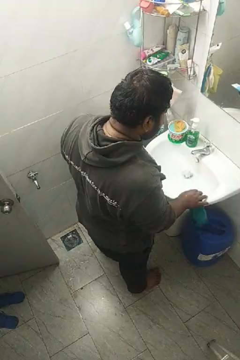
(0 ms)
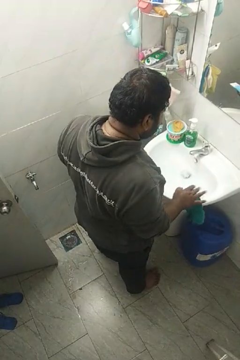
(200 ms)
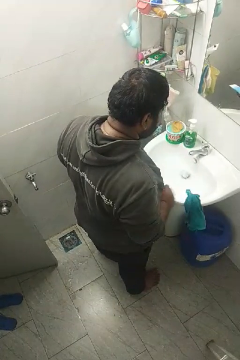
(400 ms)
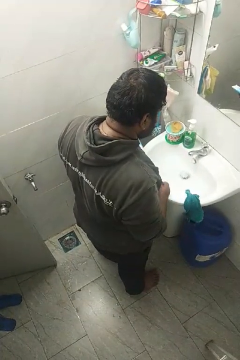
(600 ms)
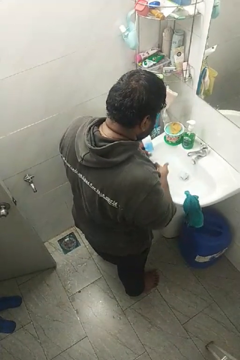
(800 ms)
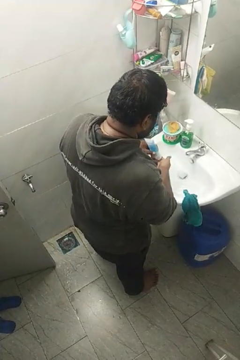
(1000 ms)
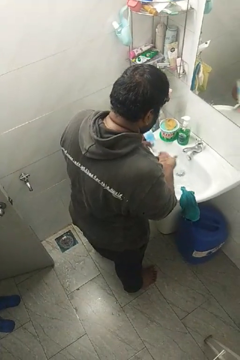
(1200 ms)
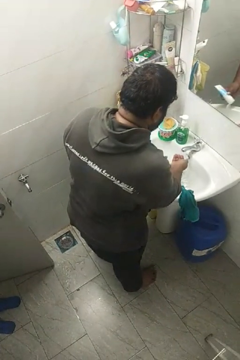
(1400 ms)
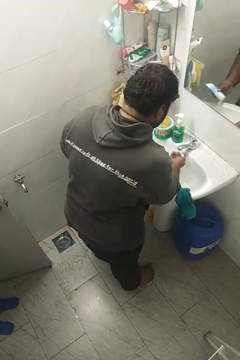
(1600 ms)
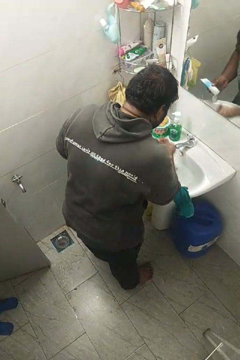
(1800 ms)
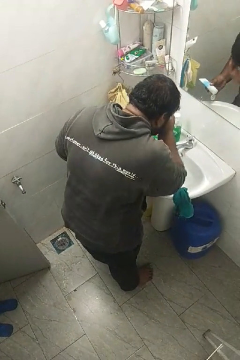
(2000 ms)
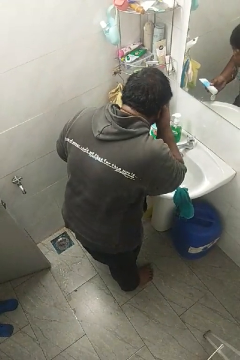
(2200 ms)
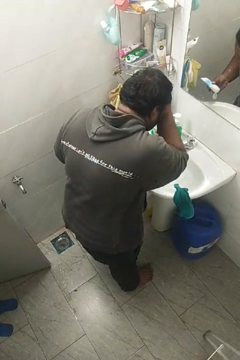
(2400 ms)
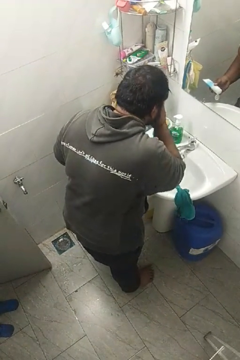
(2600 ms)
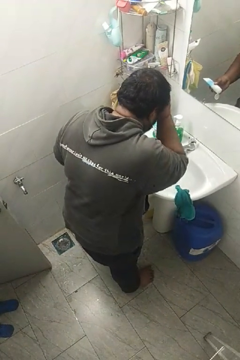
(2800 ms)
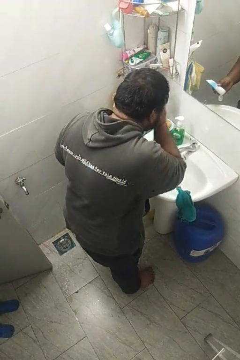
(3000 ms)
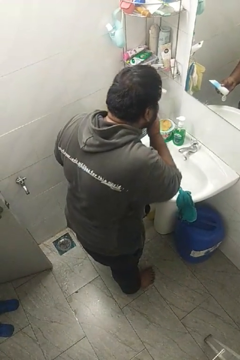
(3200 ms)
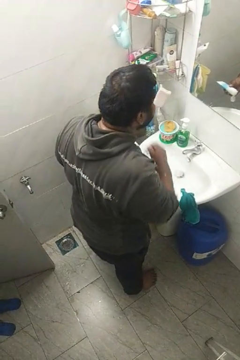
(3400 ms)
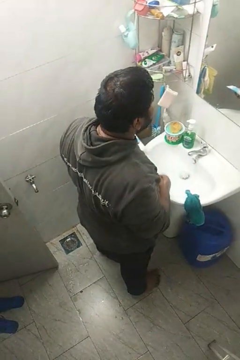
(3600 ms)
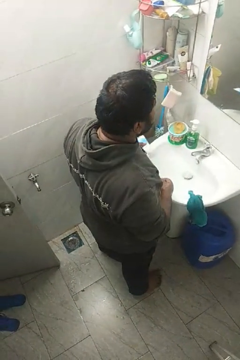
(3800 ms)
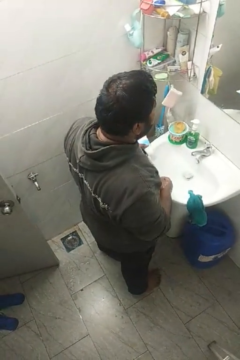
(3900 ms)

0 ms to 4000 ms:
person washes face

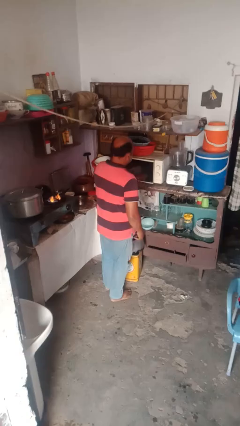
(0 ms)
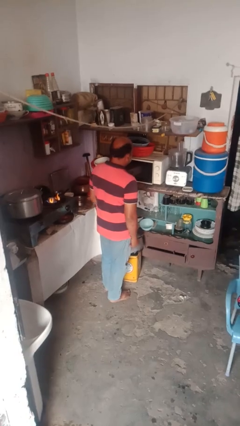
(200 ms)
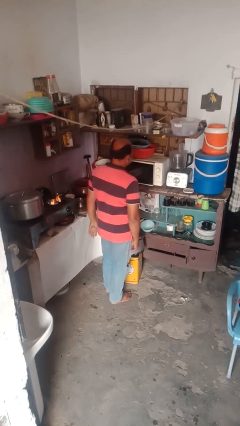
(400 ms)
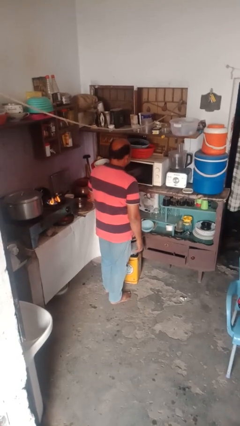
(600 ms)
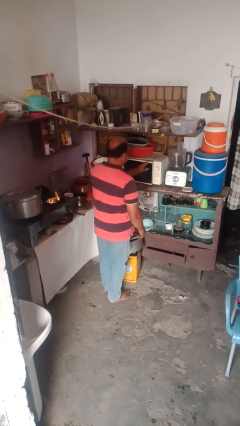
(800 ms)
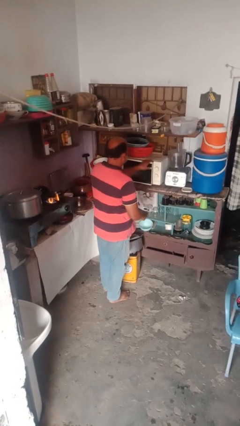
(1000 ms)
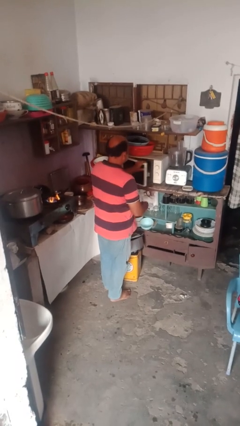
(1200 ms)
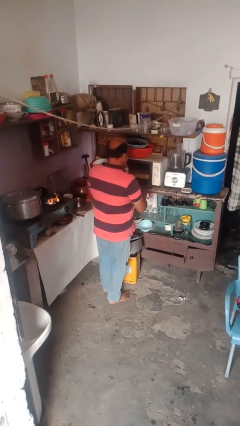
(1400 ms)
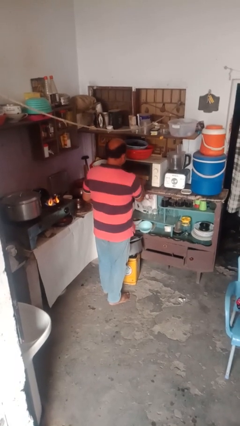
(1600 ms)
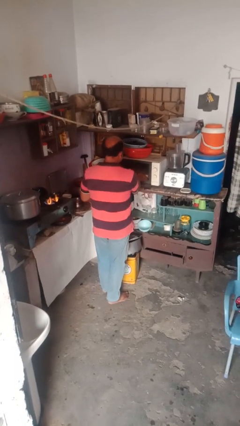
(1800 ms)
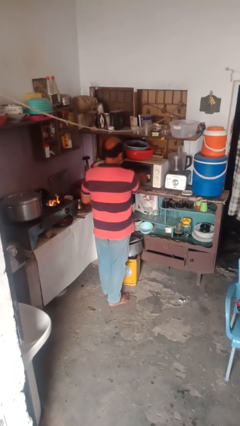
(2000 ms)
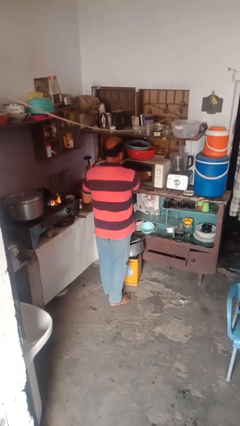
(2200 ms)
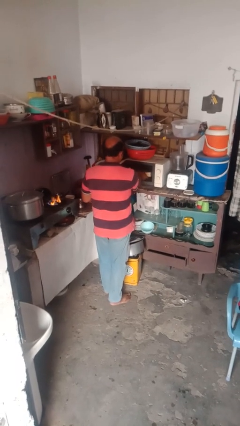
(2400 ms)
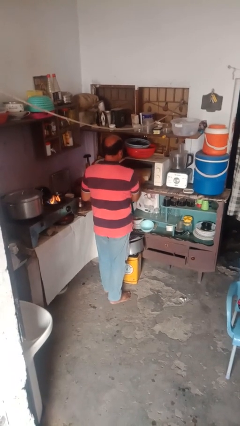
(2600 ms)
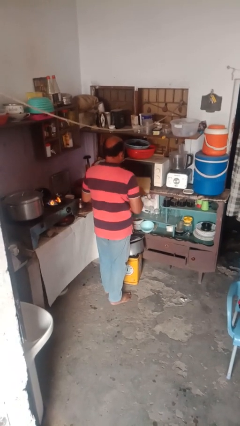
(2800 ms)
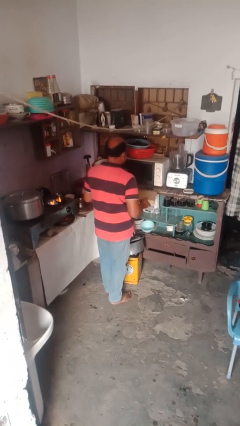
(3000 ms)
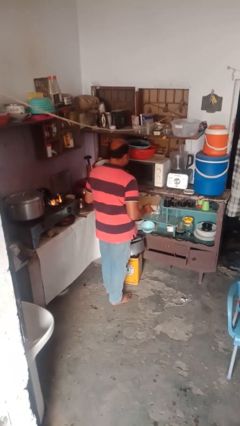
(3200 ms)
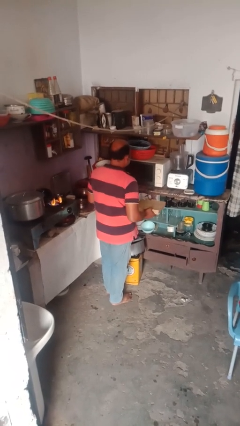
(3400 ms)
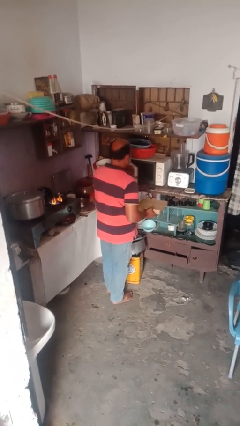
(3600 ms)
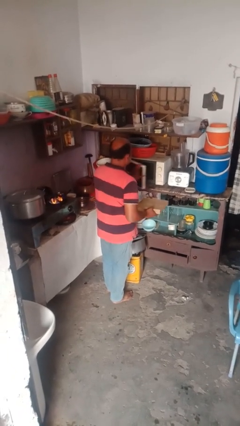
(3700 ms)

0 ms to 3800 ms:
person takes object from microwave

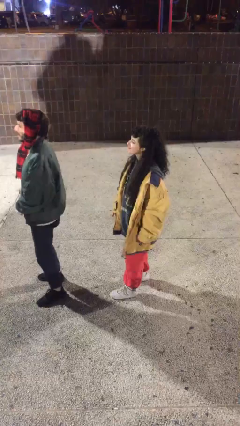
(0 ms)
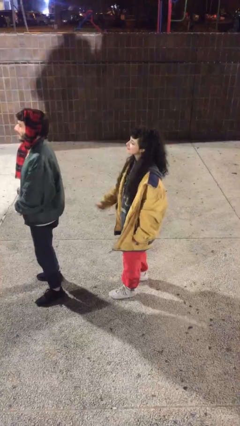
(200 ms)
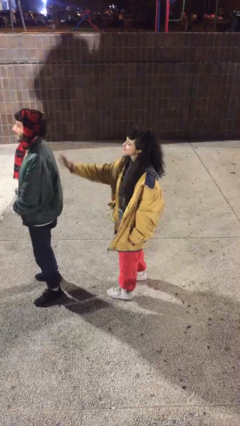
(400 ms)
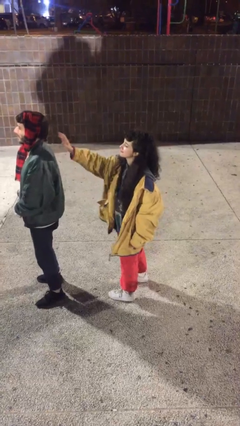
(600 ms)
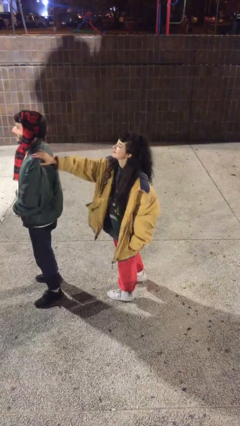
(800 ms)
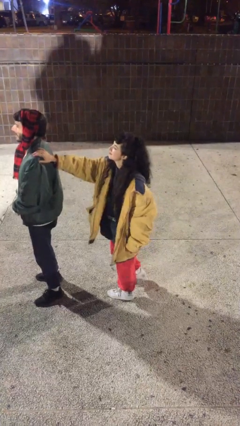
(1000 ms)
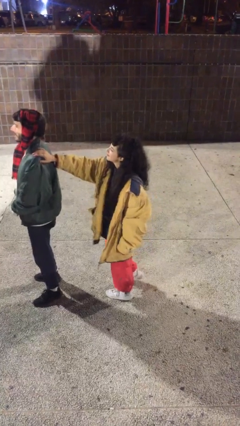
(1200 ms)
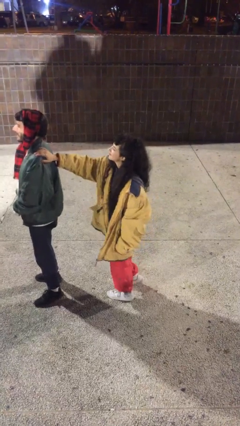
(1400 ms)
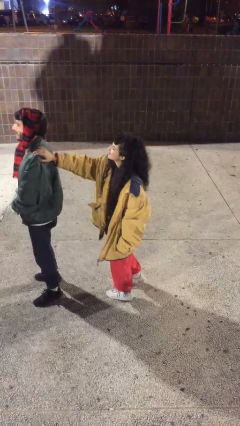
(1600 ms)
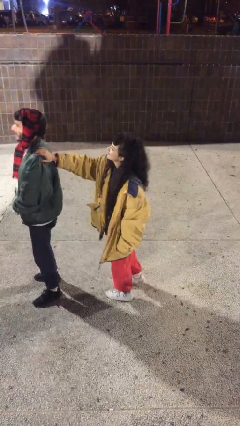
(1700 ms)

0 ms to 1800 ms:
person grabs person by shoulder

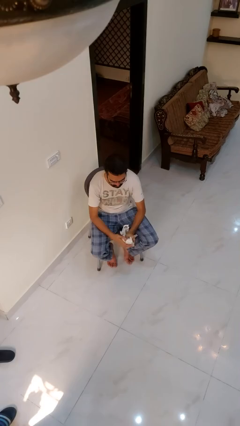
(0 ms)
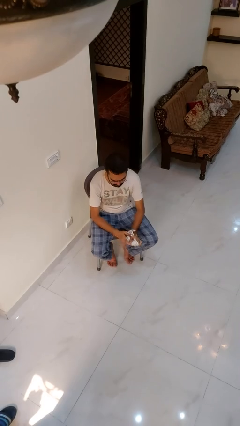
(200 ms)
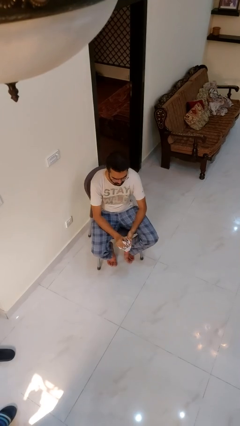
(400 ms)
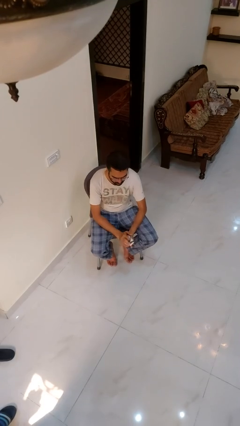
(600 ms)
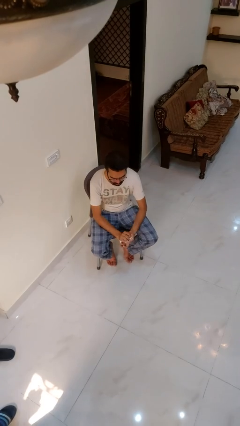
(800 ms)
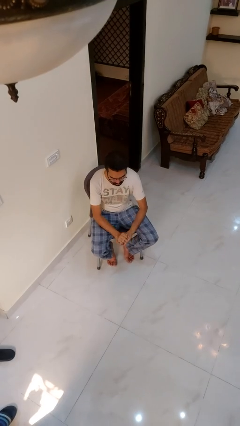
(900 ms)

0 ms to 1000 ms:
person crumples paper

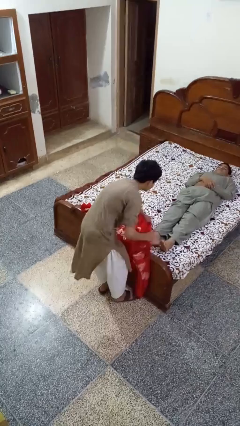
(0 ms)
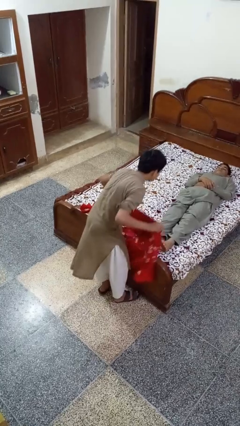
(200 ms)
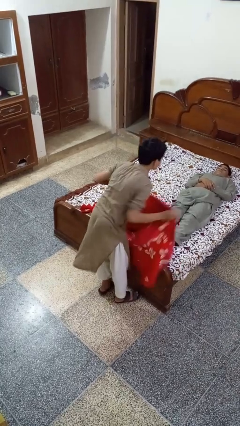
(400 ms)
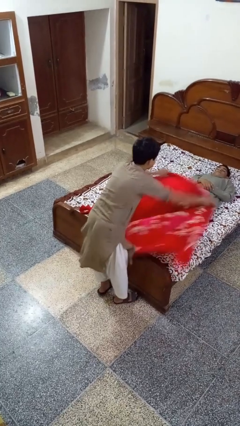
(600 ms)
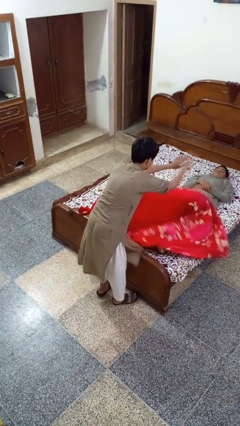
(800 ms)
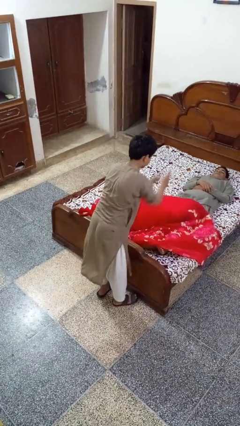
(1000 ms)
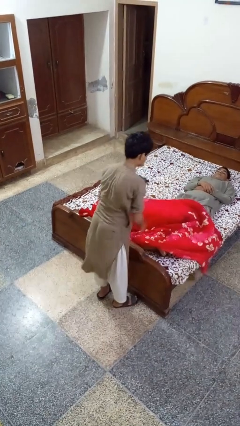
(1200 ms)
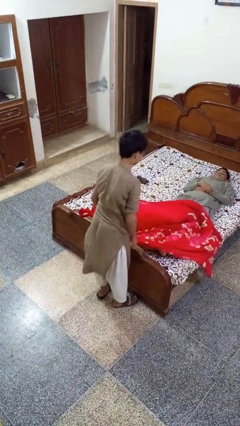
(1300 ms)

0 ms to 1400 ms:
person covers friend with blanket

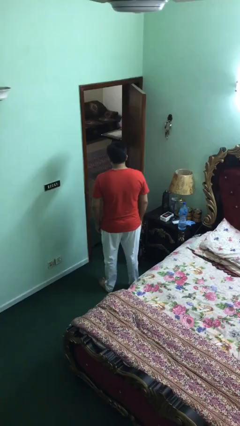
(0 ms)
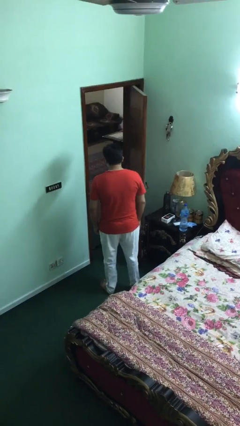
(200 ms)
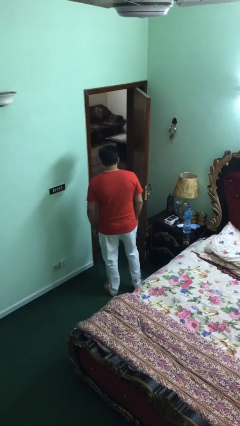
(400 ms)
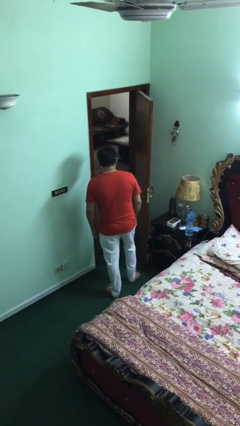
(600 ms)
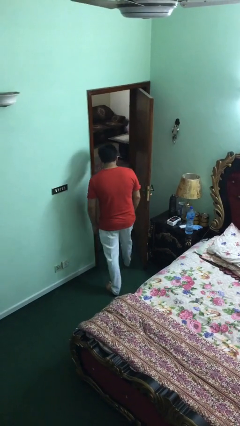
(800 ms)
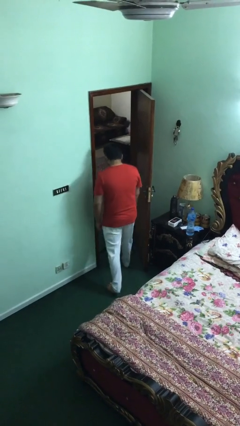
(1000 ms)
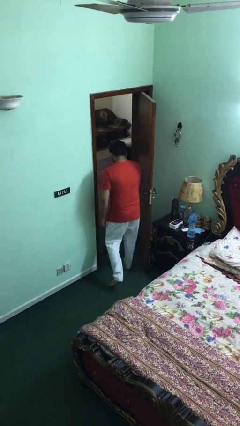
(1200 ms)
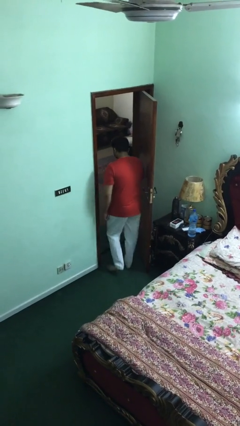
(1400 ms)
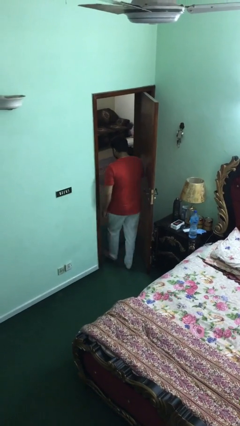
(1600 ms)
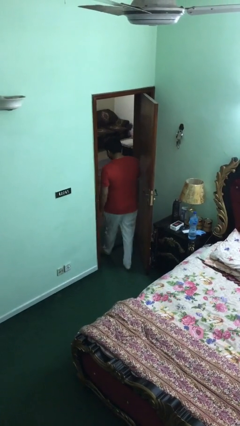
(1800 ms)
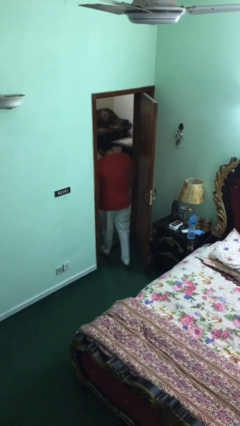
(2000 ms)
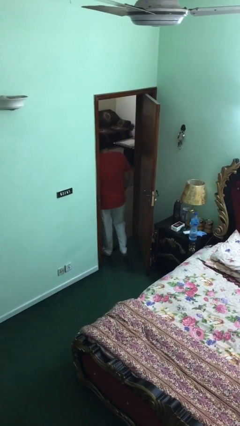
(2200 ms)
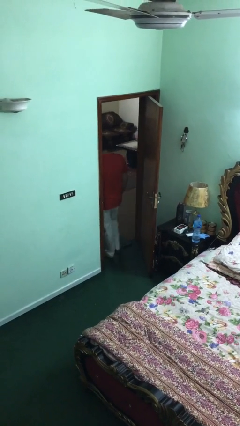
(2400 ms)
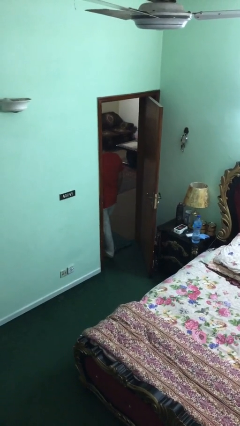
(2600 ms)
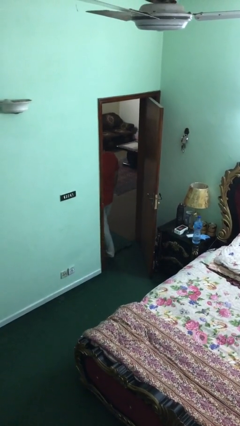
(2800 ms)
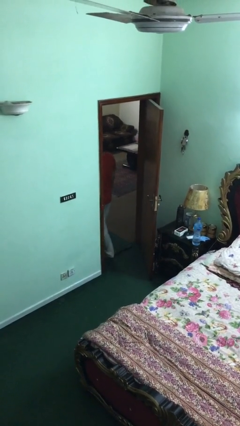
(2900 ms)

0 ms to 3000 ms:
person exits scene through structure

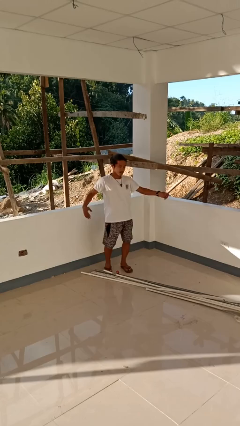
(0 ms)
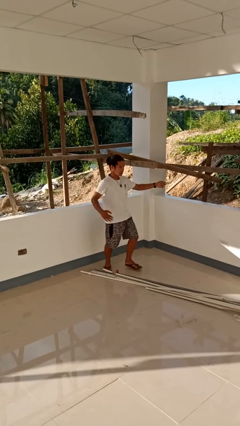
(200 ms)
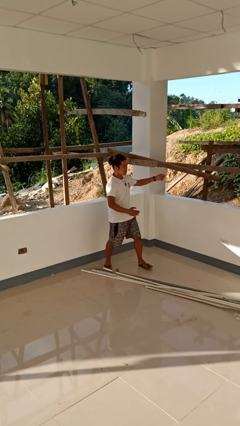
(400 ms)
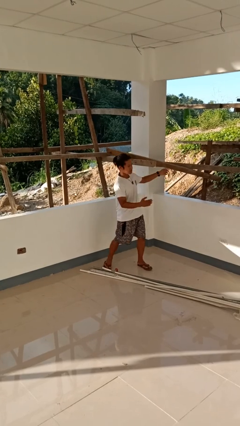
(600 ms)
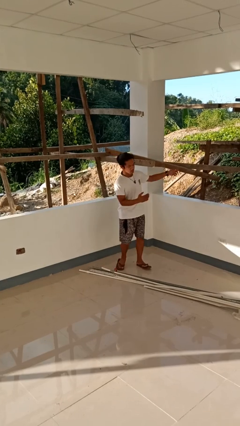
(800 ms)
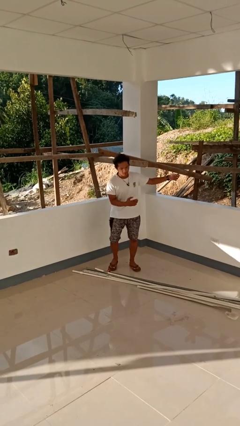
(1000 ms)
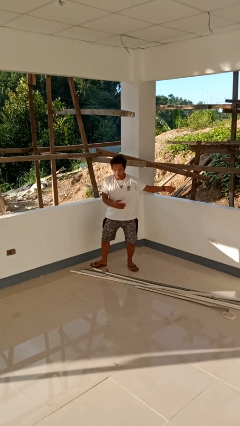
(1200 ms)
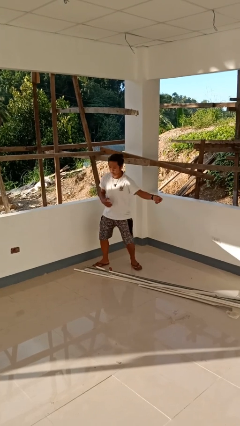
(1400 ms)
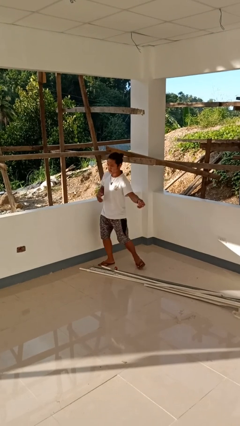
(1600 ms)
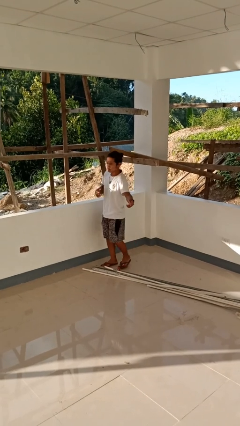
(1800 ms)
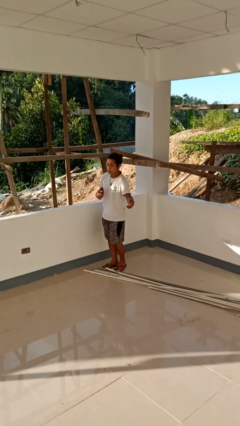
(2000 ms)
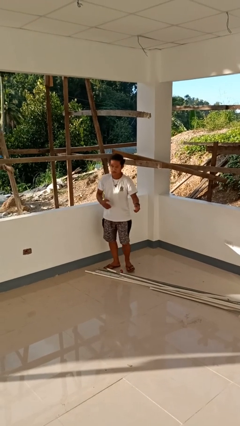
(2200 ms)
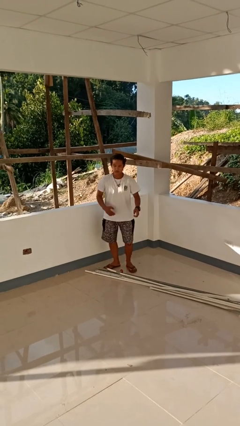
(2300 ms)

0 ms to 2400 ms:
person dances in place

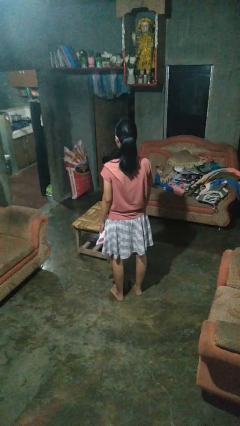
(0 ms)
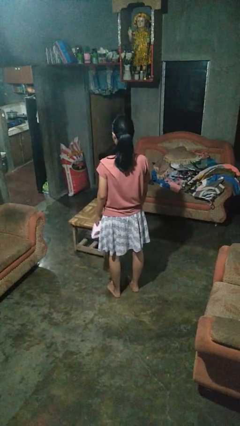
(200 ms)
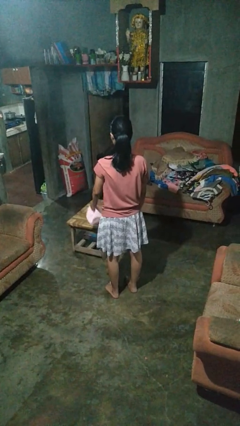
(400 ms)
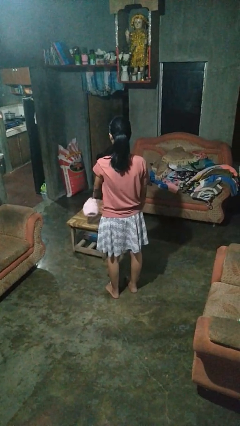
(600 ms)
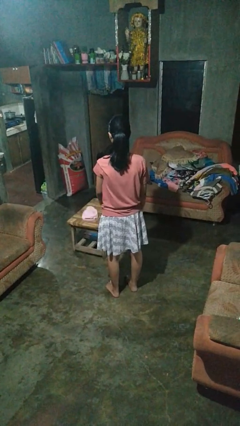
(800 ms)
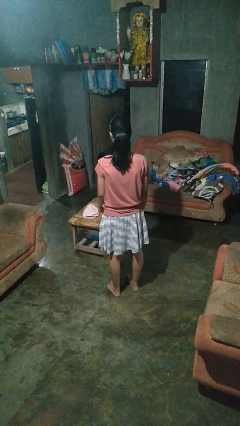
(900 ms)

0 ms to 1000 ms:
person throws object on table
